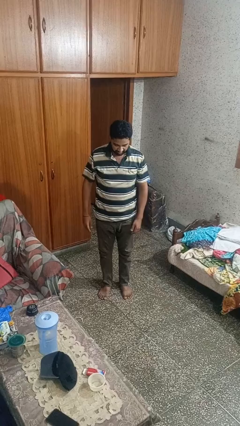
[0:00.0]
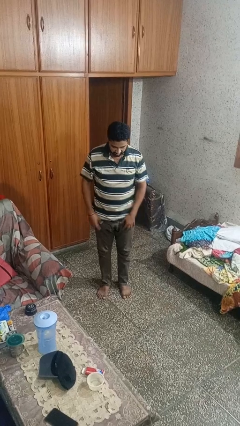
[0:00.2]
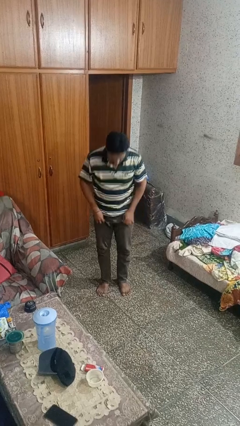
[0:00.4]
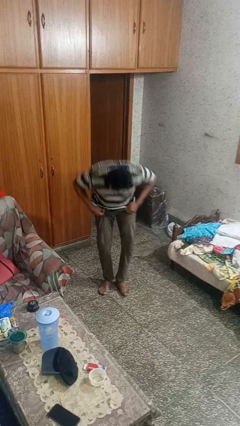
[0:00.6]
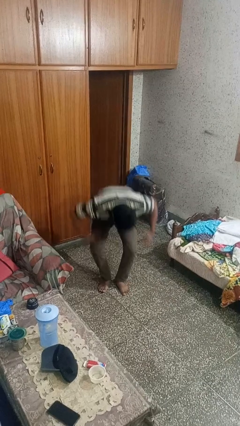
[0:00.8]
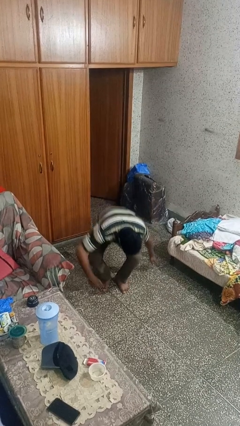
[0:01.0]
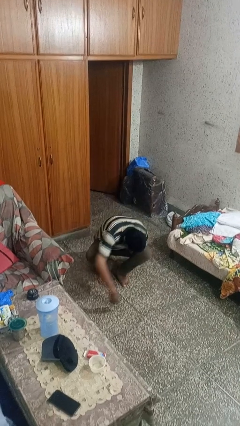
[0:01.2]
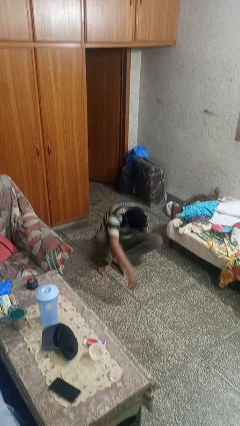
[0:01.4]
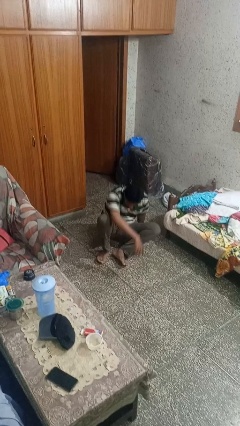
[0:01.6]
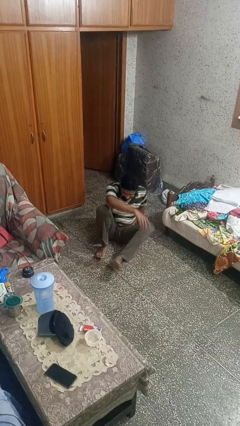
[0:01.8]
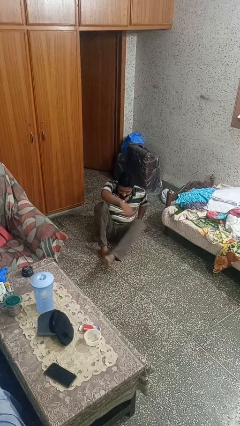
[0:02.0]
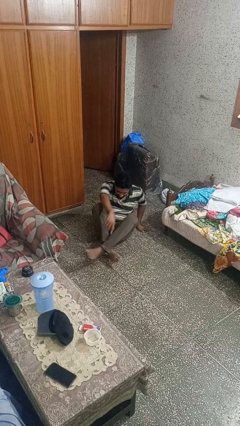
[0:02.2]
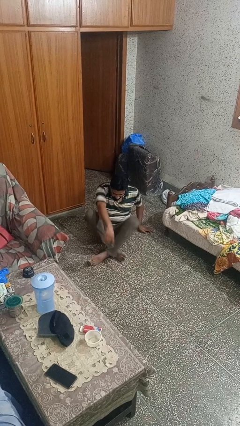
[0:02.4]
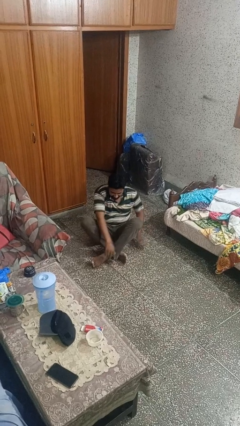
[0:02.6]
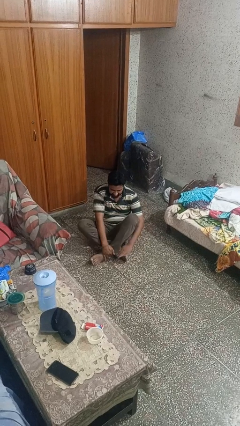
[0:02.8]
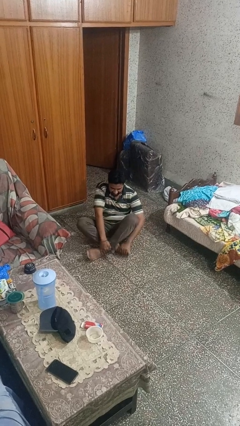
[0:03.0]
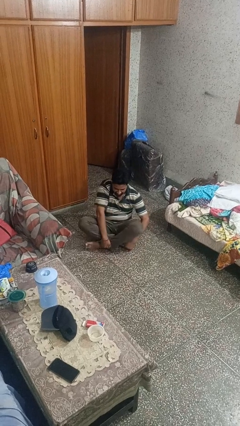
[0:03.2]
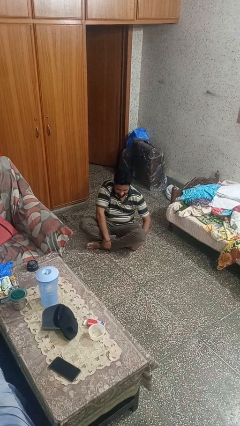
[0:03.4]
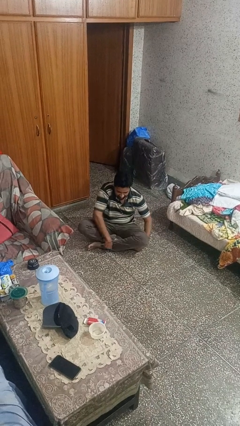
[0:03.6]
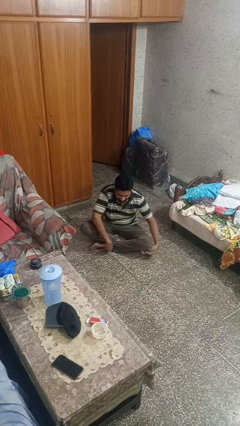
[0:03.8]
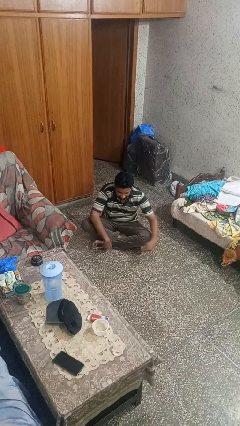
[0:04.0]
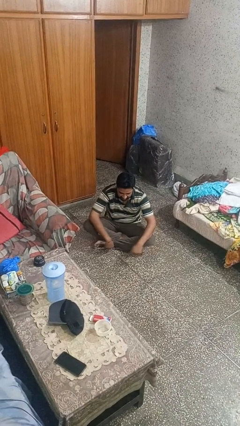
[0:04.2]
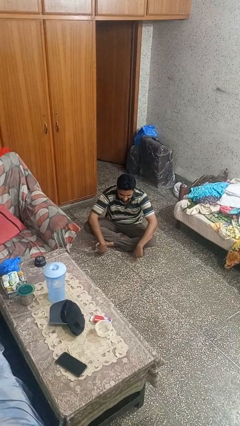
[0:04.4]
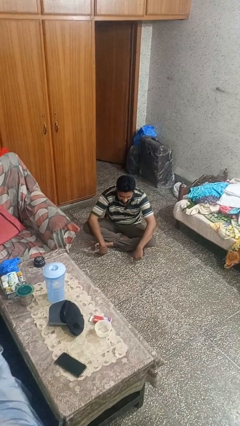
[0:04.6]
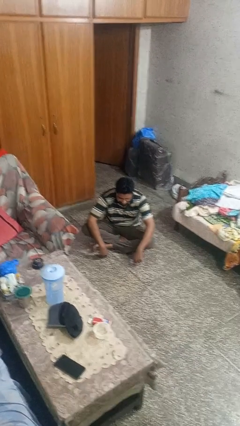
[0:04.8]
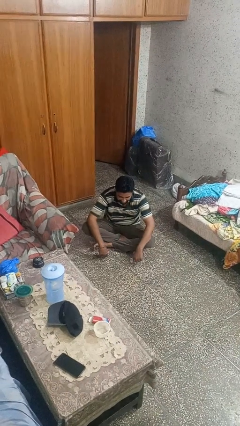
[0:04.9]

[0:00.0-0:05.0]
person sits crisscross

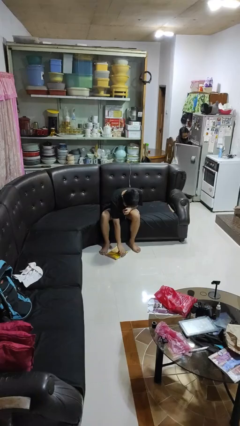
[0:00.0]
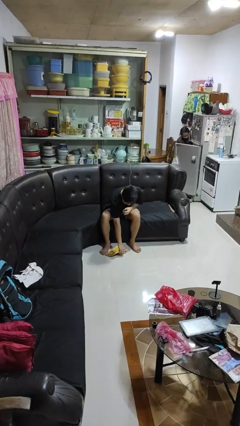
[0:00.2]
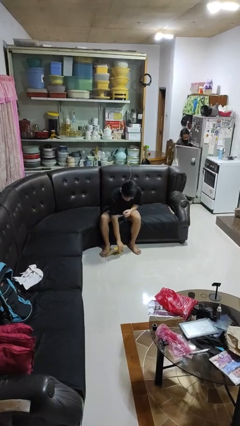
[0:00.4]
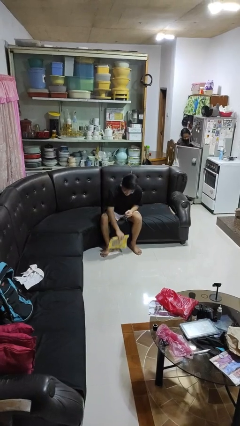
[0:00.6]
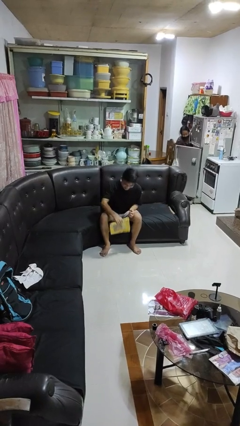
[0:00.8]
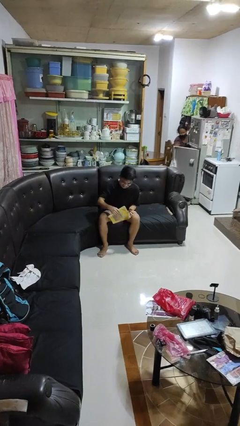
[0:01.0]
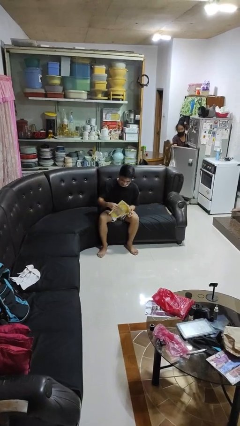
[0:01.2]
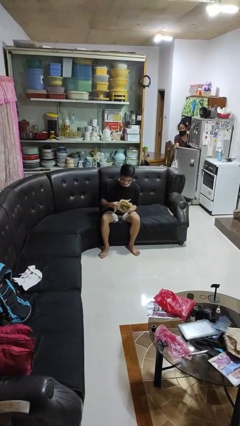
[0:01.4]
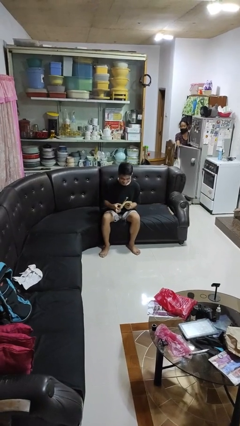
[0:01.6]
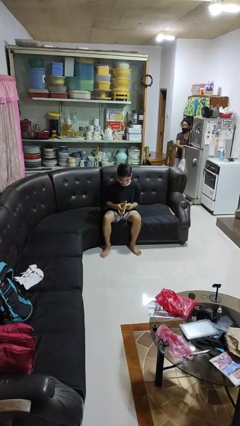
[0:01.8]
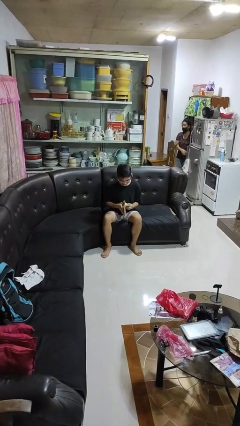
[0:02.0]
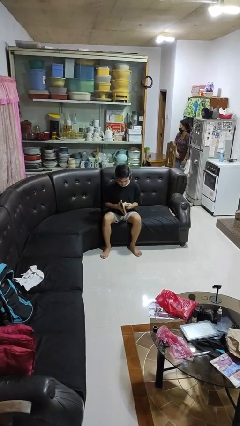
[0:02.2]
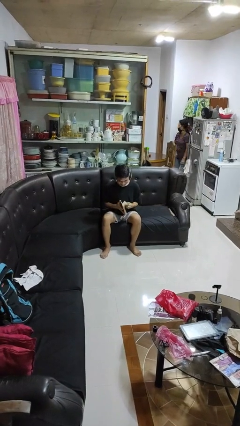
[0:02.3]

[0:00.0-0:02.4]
person picks up object from floor

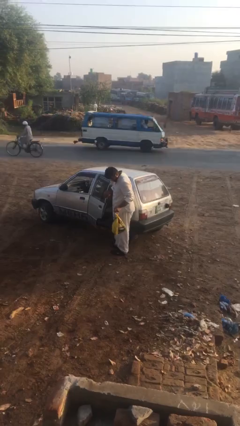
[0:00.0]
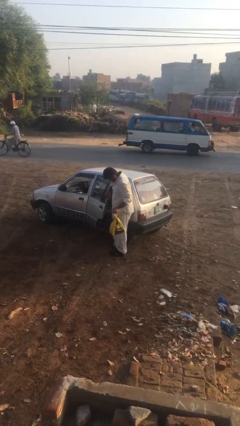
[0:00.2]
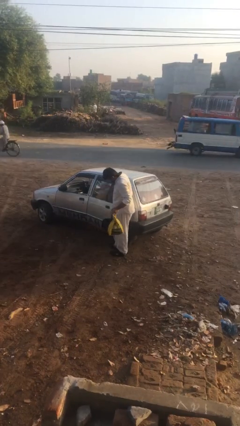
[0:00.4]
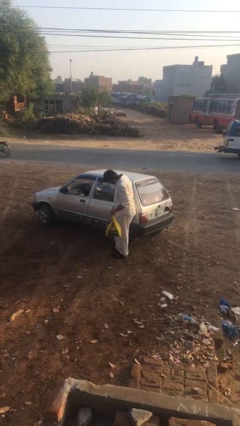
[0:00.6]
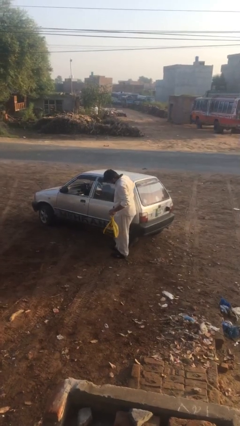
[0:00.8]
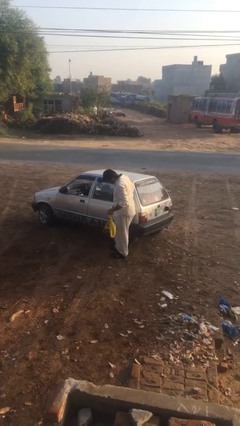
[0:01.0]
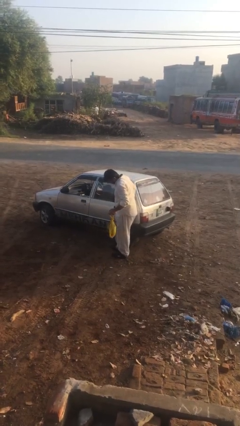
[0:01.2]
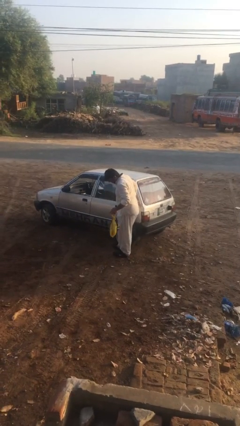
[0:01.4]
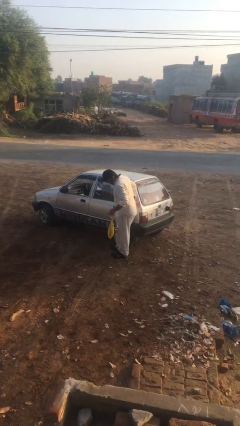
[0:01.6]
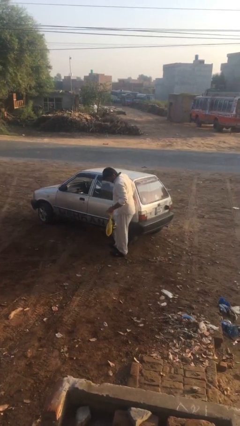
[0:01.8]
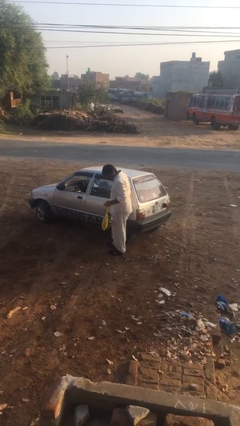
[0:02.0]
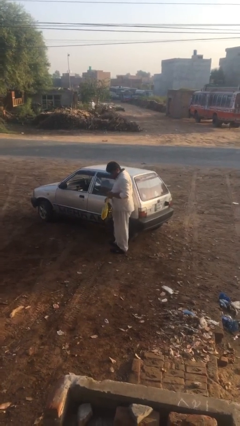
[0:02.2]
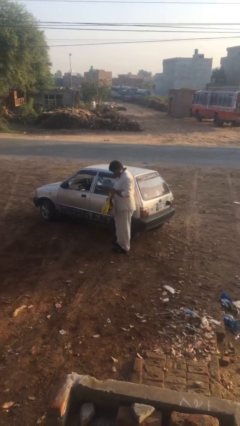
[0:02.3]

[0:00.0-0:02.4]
person closes car door

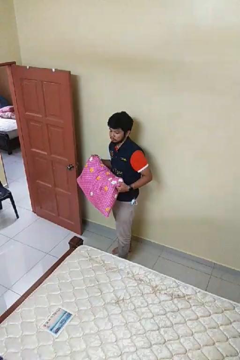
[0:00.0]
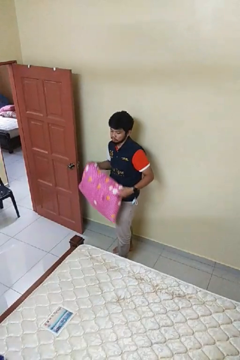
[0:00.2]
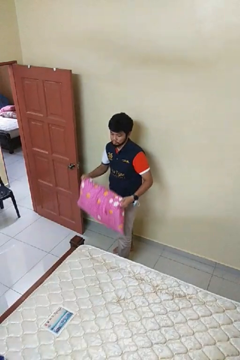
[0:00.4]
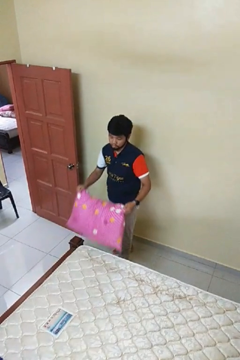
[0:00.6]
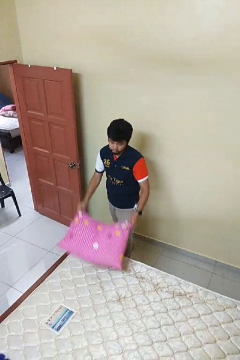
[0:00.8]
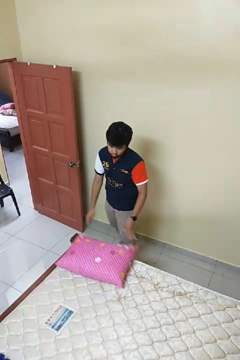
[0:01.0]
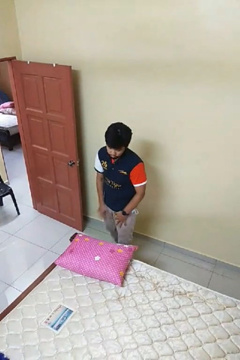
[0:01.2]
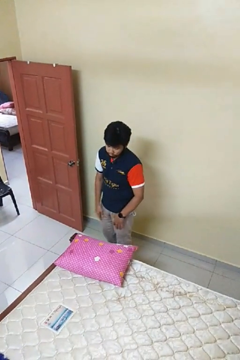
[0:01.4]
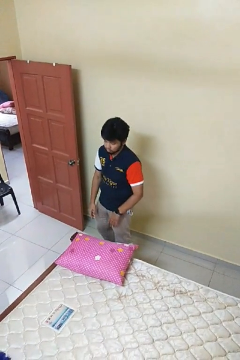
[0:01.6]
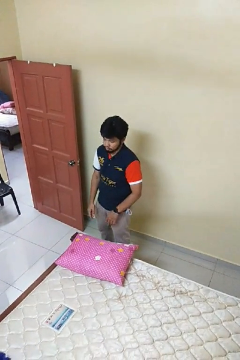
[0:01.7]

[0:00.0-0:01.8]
person puts down object on bed

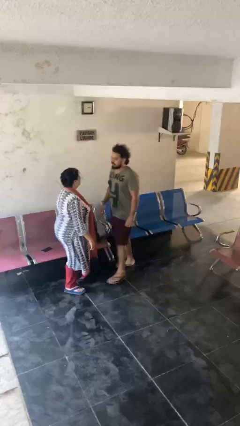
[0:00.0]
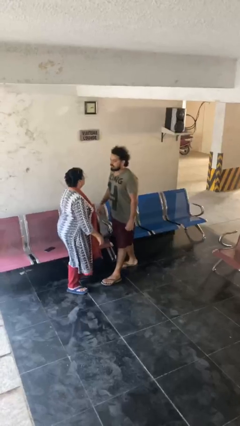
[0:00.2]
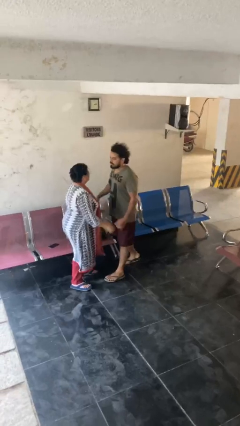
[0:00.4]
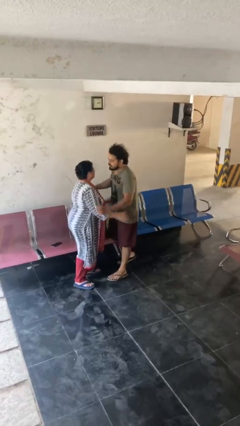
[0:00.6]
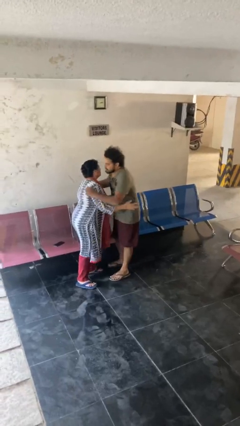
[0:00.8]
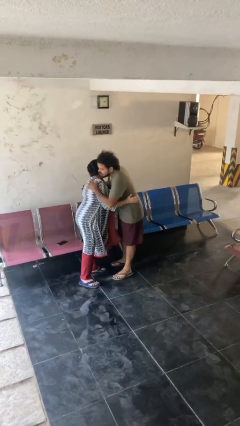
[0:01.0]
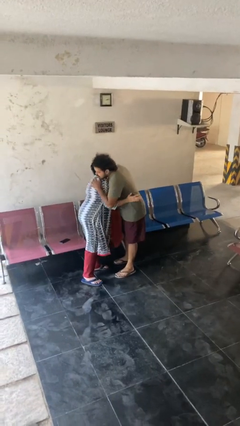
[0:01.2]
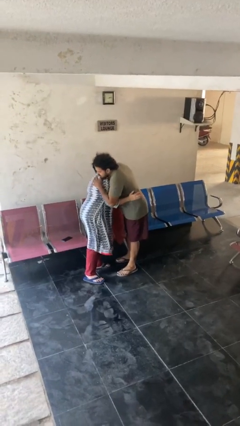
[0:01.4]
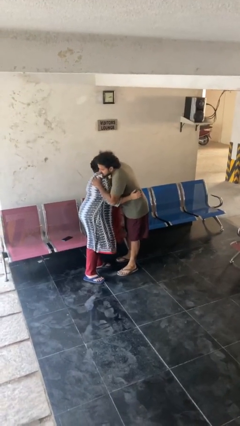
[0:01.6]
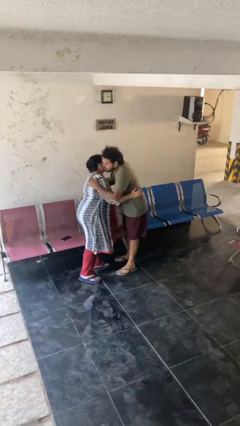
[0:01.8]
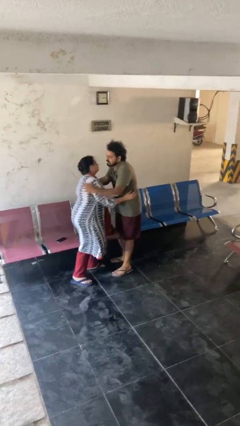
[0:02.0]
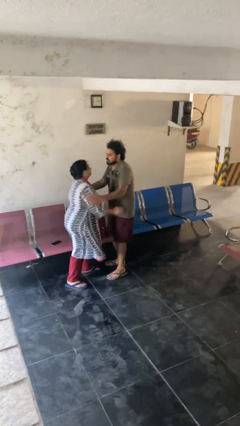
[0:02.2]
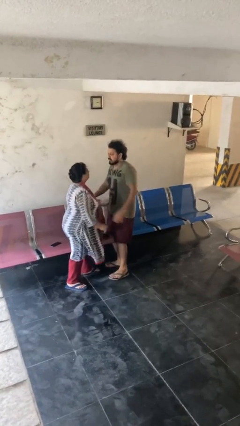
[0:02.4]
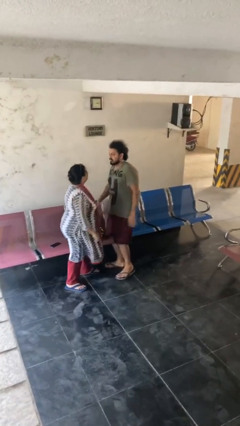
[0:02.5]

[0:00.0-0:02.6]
person embraces person

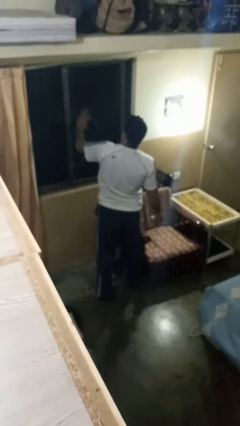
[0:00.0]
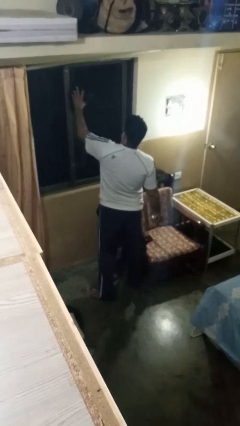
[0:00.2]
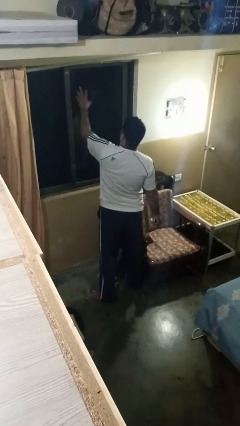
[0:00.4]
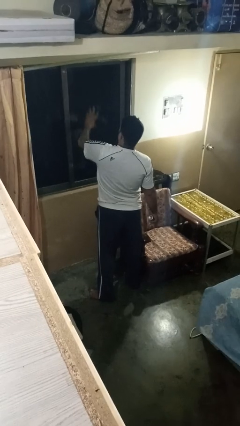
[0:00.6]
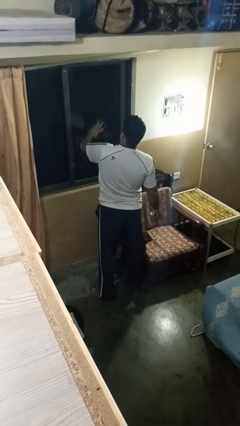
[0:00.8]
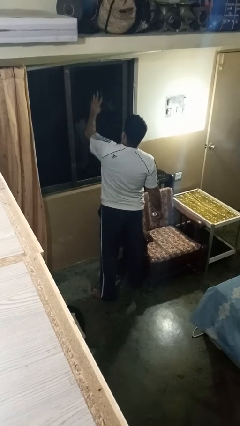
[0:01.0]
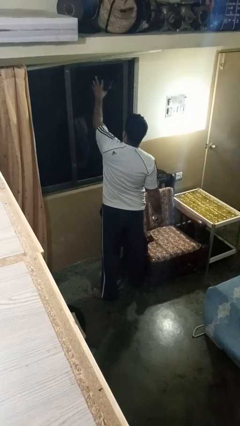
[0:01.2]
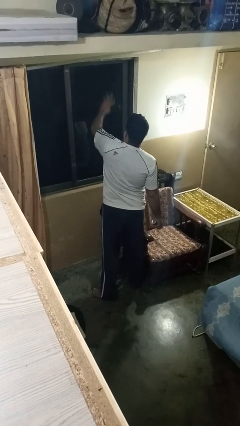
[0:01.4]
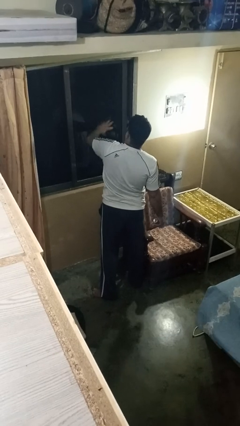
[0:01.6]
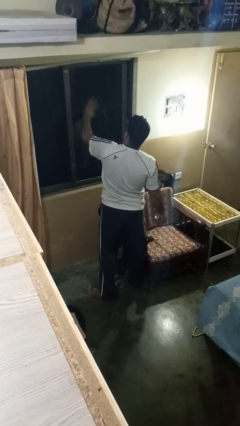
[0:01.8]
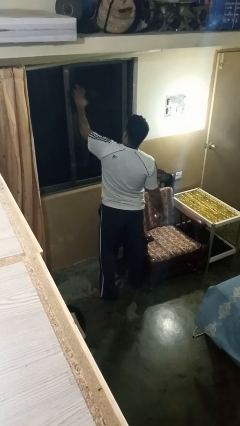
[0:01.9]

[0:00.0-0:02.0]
person washes window

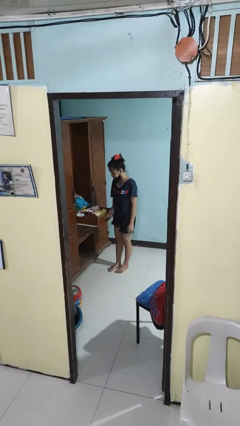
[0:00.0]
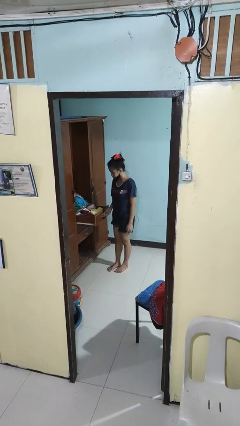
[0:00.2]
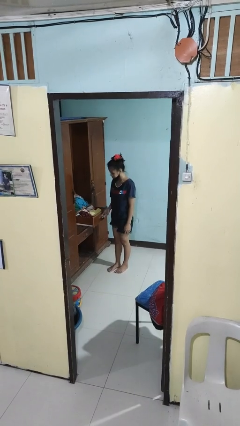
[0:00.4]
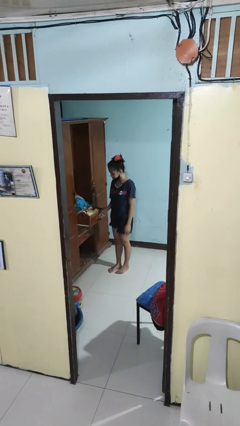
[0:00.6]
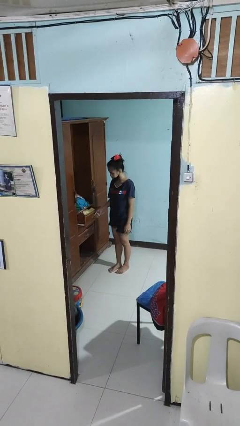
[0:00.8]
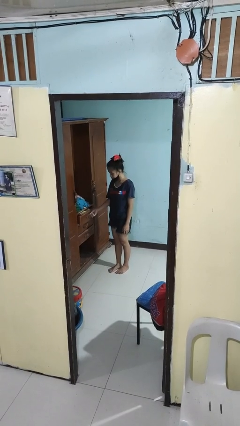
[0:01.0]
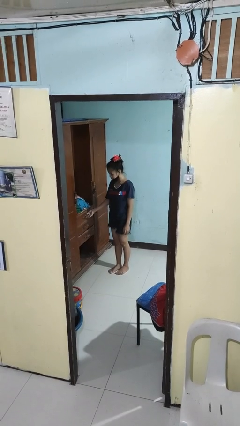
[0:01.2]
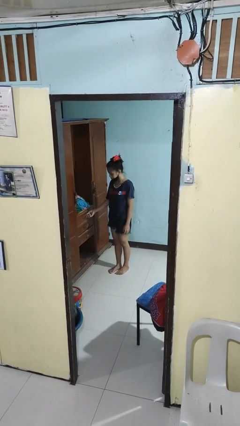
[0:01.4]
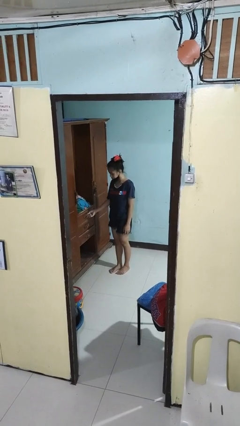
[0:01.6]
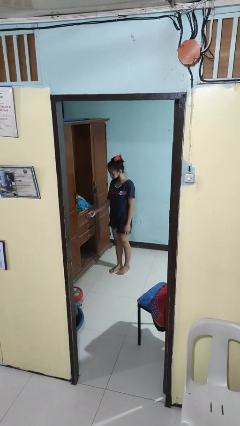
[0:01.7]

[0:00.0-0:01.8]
person closes dresser drawer
